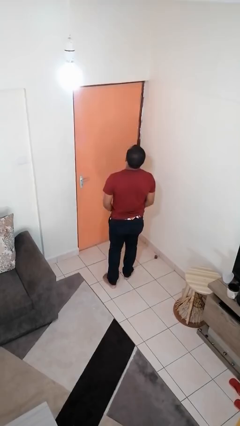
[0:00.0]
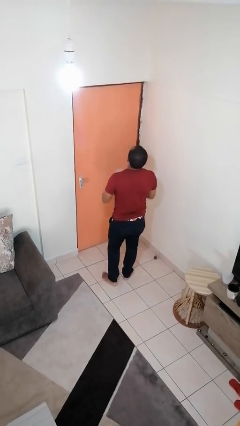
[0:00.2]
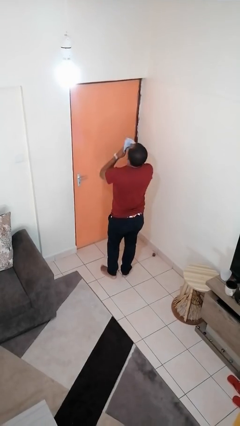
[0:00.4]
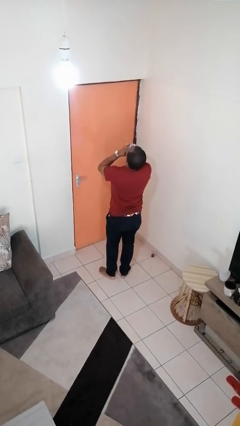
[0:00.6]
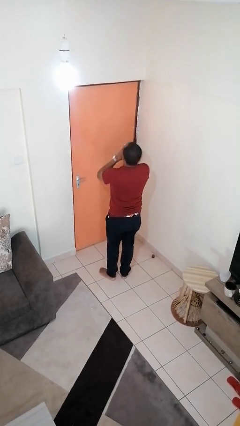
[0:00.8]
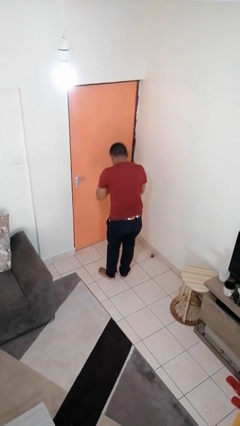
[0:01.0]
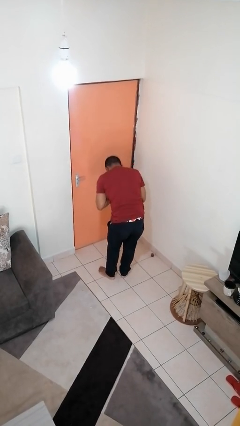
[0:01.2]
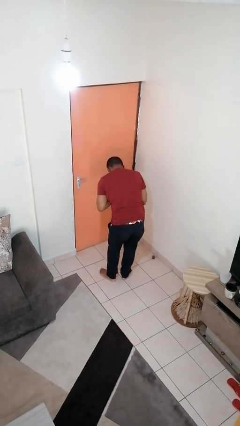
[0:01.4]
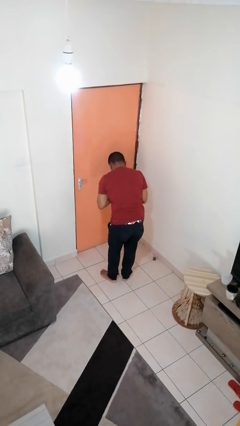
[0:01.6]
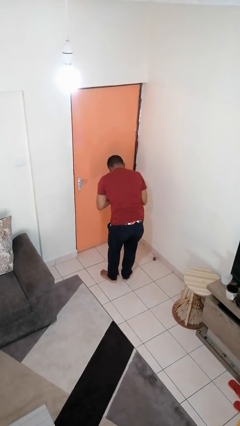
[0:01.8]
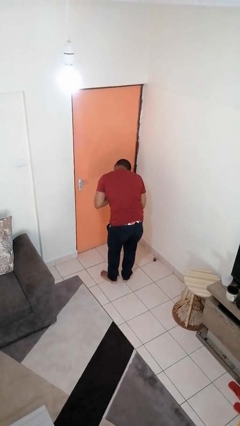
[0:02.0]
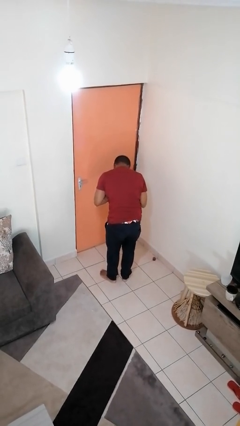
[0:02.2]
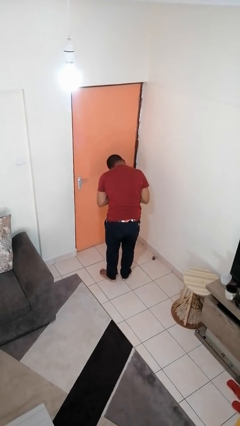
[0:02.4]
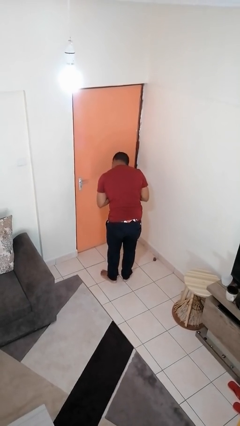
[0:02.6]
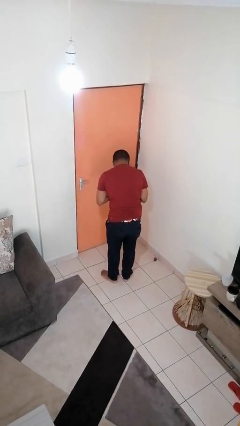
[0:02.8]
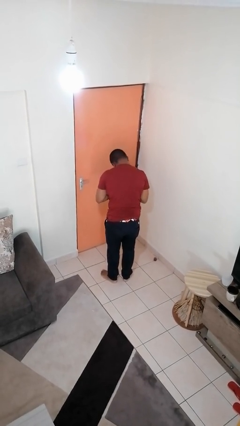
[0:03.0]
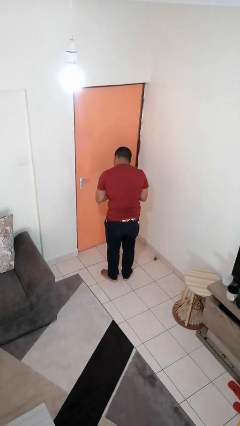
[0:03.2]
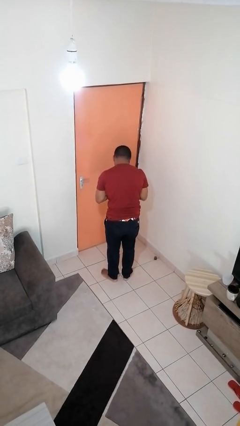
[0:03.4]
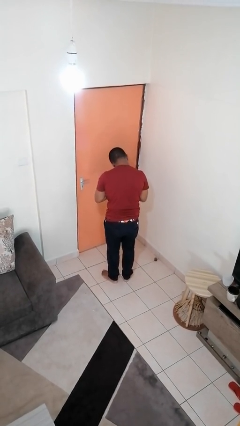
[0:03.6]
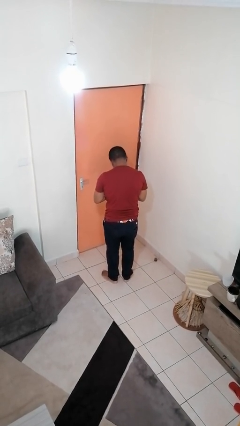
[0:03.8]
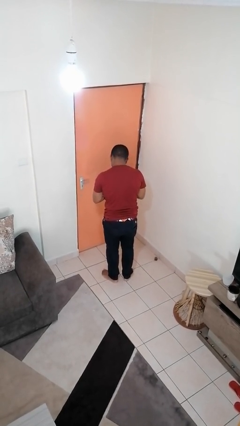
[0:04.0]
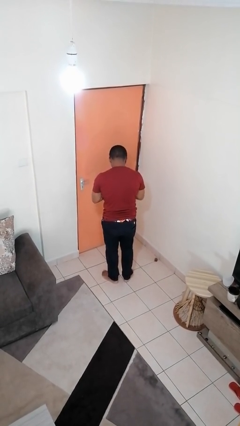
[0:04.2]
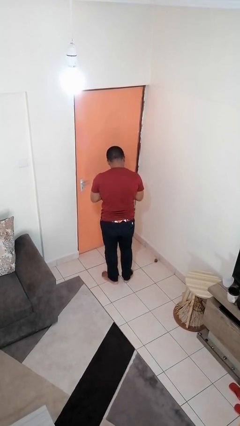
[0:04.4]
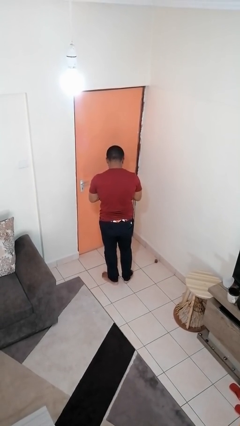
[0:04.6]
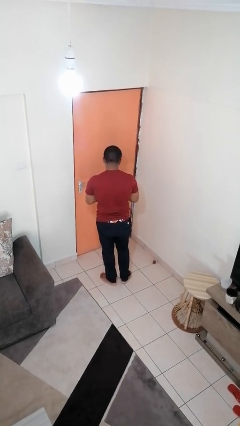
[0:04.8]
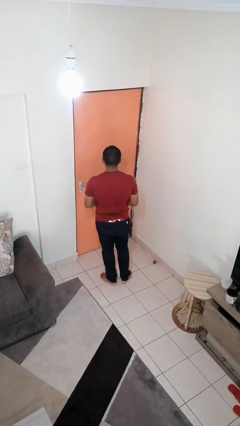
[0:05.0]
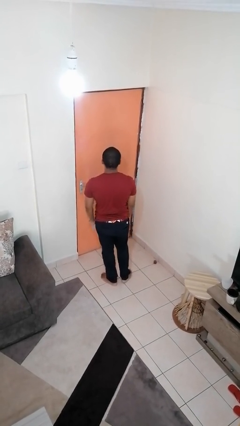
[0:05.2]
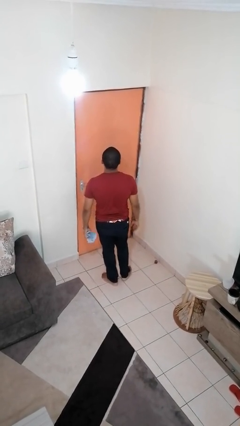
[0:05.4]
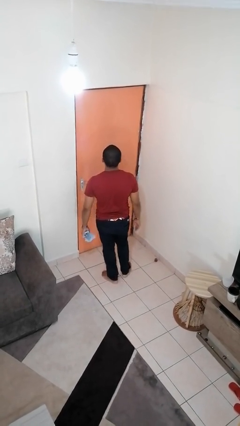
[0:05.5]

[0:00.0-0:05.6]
person blows nose

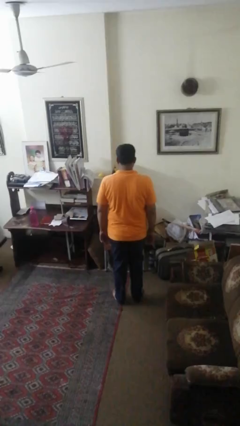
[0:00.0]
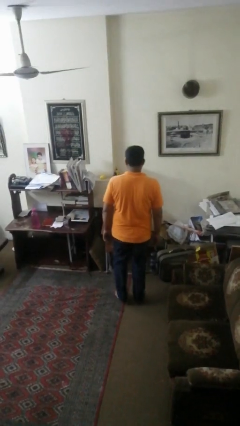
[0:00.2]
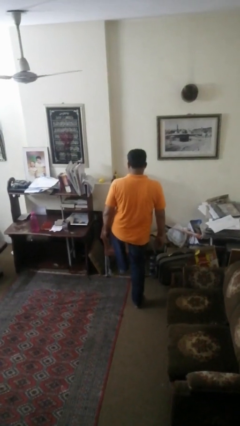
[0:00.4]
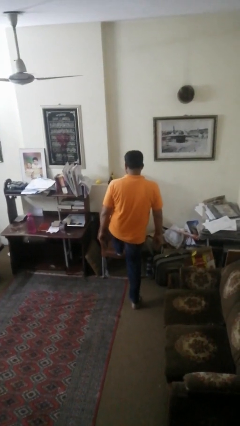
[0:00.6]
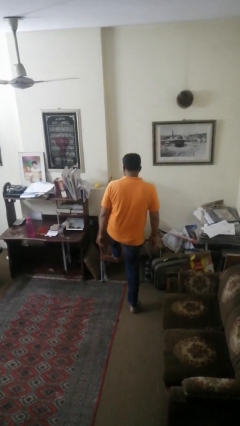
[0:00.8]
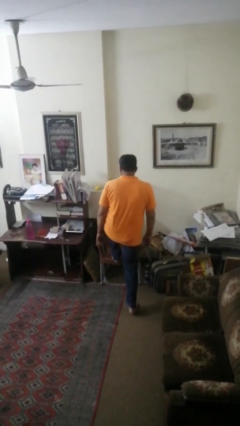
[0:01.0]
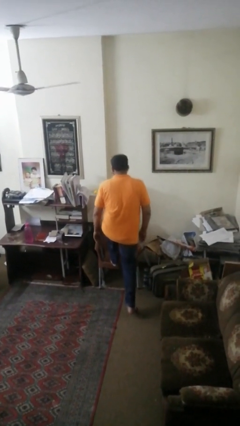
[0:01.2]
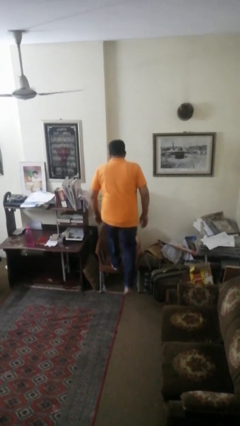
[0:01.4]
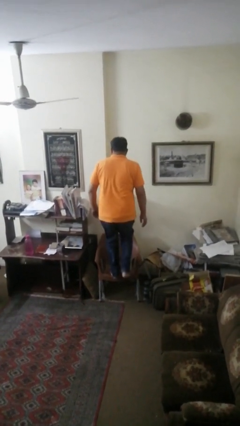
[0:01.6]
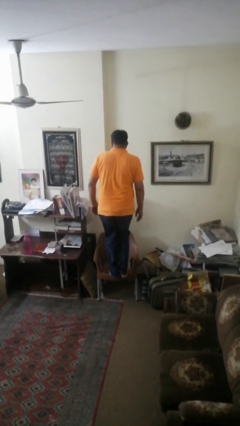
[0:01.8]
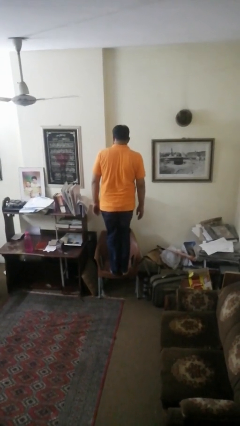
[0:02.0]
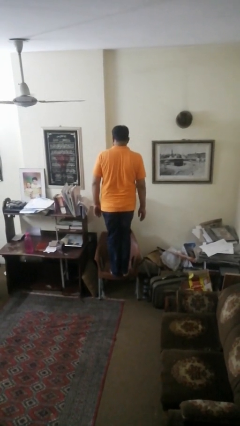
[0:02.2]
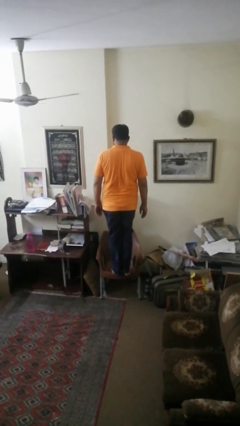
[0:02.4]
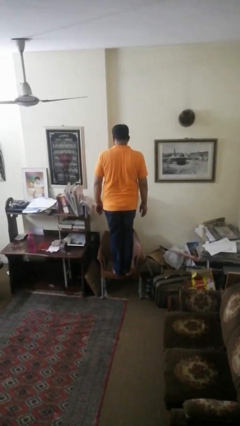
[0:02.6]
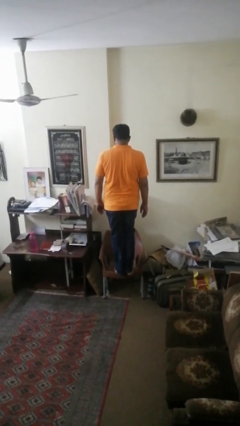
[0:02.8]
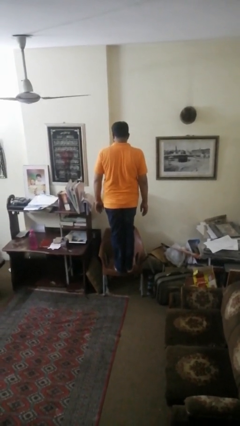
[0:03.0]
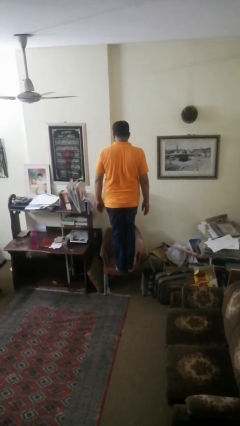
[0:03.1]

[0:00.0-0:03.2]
person climbs on chair

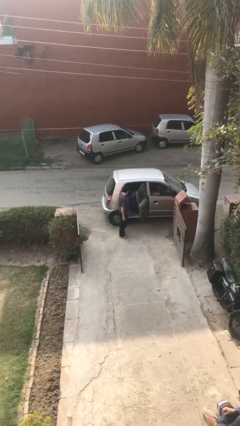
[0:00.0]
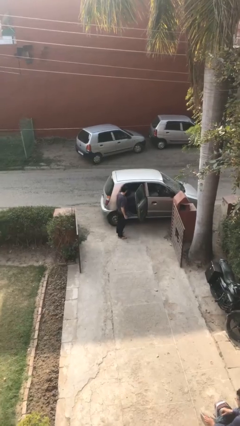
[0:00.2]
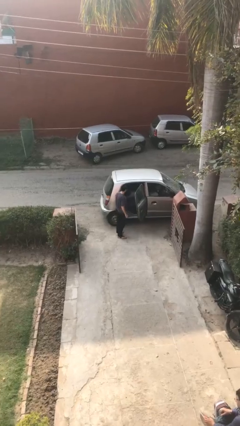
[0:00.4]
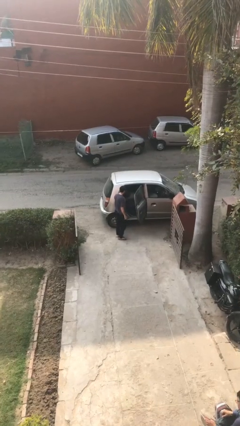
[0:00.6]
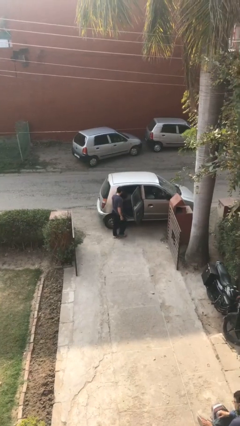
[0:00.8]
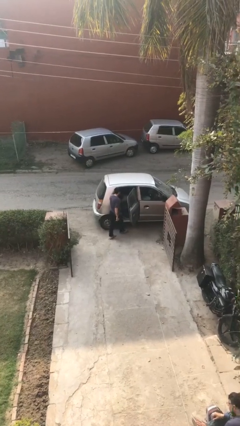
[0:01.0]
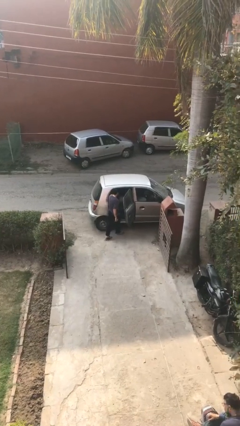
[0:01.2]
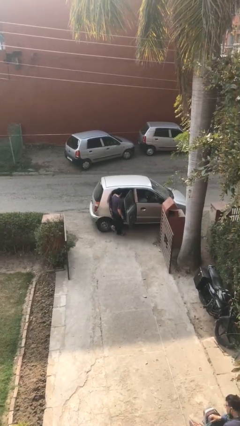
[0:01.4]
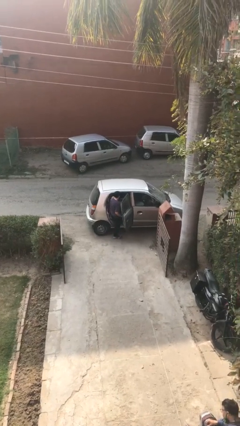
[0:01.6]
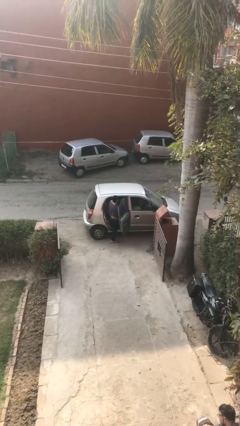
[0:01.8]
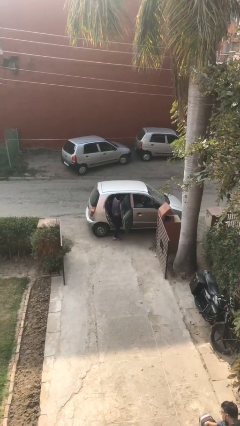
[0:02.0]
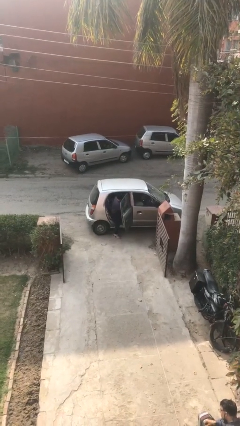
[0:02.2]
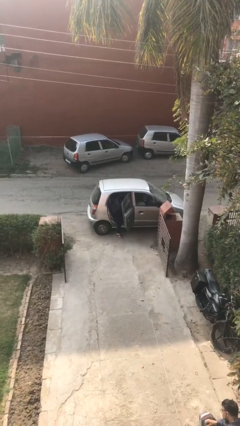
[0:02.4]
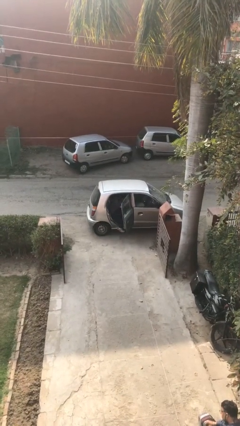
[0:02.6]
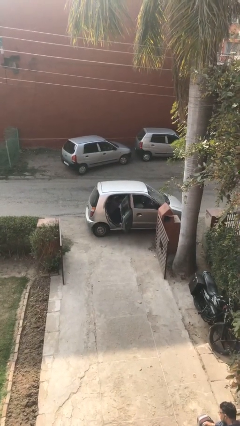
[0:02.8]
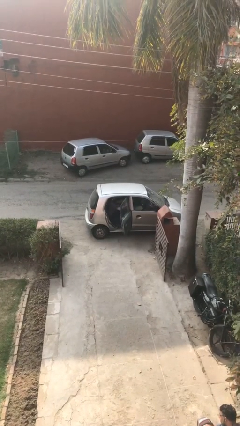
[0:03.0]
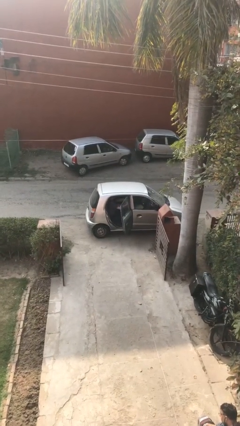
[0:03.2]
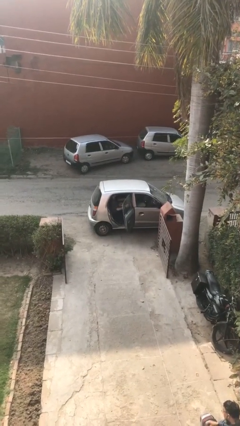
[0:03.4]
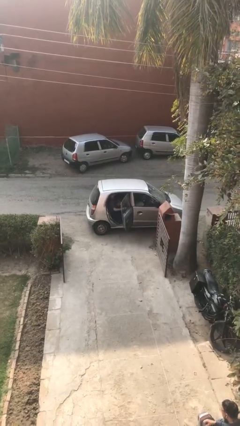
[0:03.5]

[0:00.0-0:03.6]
person enters car

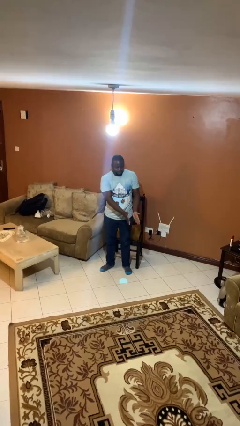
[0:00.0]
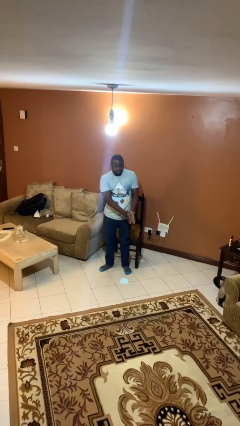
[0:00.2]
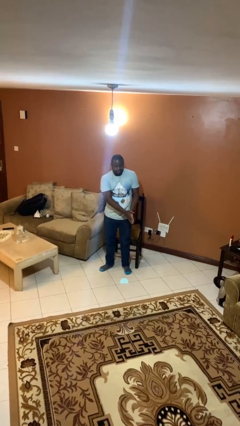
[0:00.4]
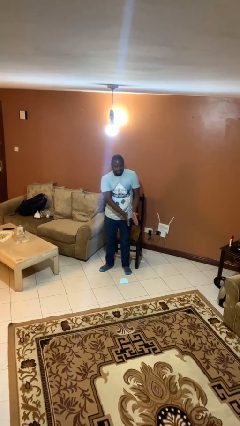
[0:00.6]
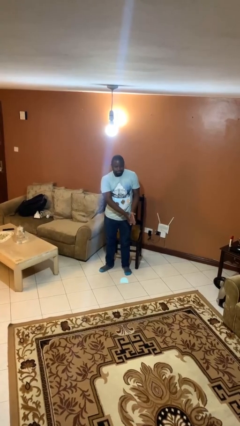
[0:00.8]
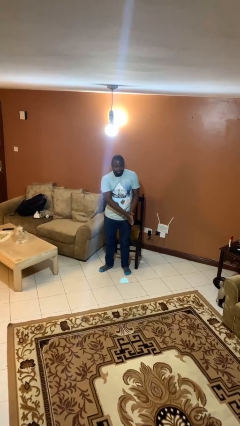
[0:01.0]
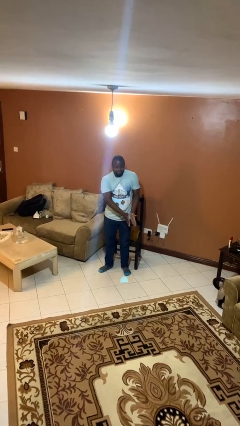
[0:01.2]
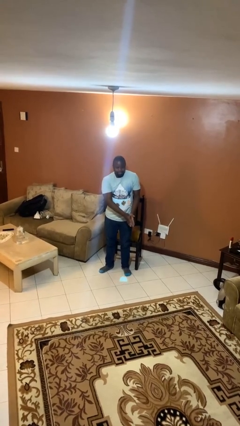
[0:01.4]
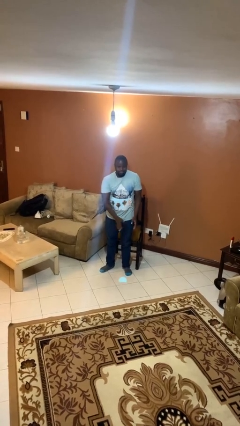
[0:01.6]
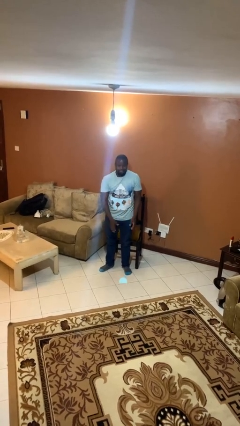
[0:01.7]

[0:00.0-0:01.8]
person claps hands

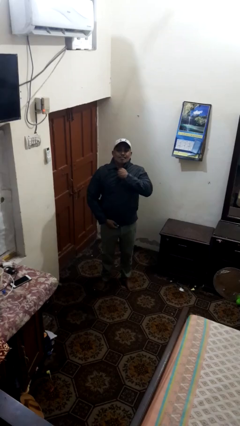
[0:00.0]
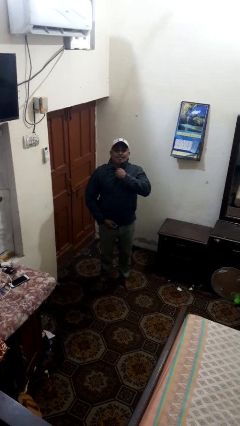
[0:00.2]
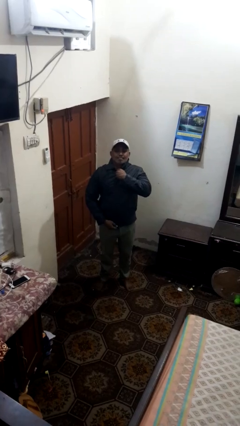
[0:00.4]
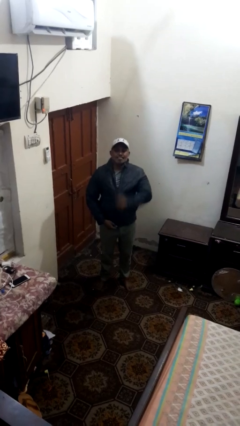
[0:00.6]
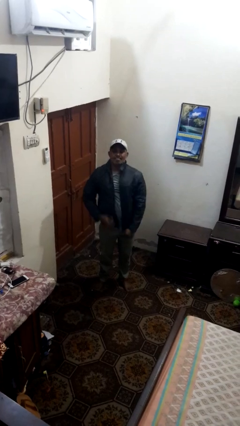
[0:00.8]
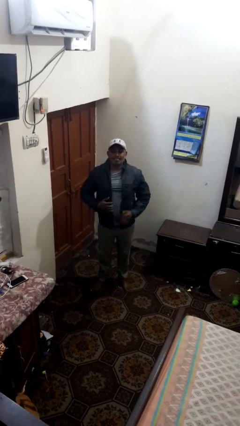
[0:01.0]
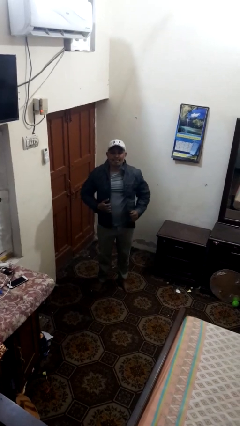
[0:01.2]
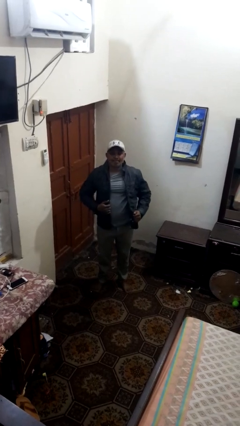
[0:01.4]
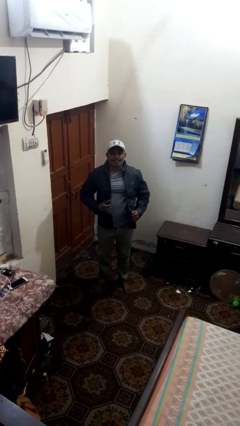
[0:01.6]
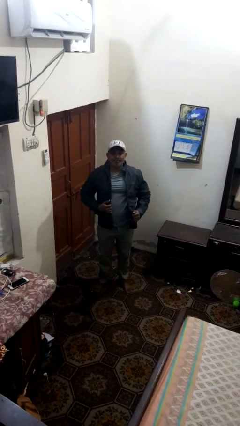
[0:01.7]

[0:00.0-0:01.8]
person unzips jacket

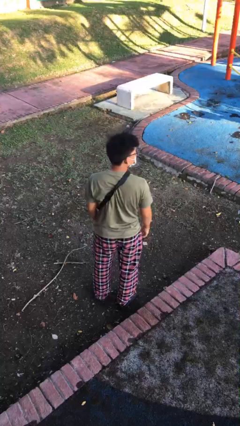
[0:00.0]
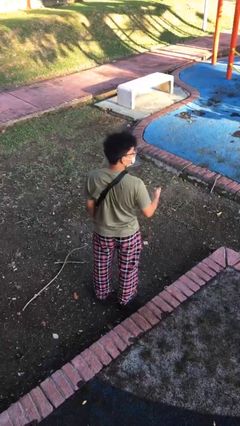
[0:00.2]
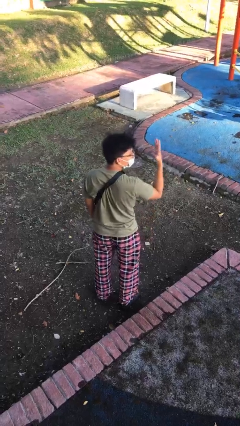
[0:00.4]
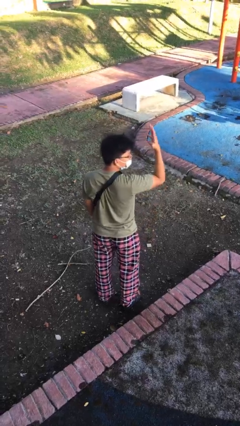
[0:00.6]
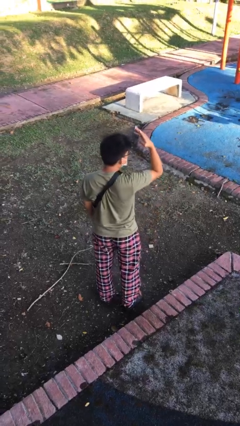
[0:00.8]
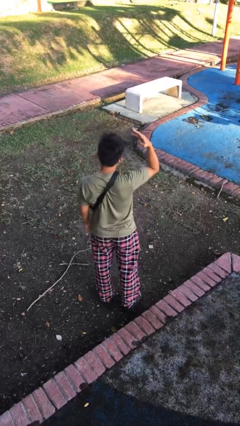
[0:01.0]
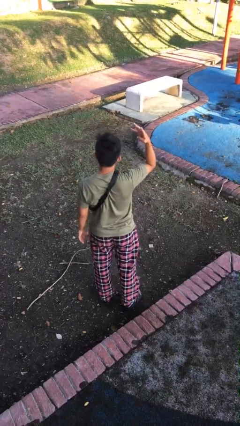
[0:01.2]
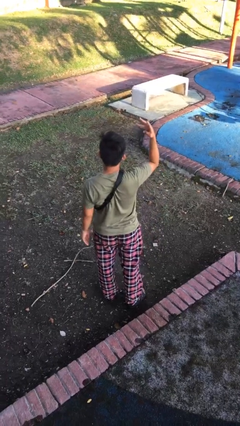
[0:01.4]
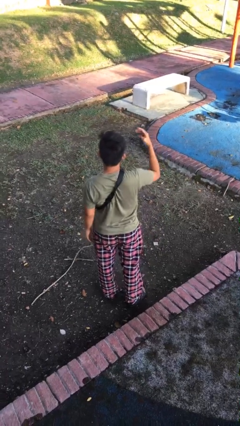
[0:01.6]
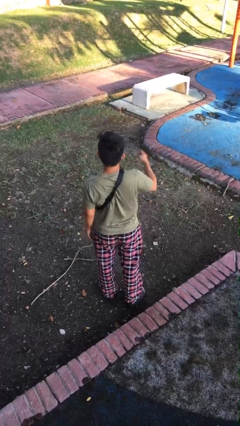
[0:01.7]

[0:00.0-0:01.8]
person gestures number four
